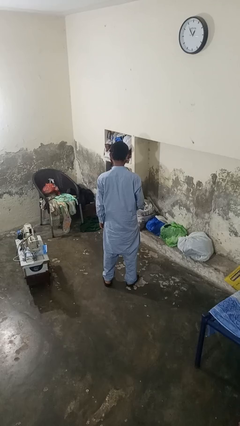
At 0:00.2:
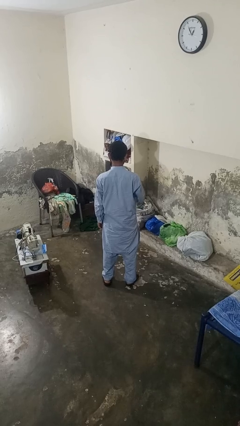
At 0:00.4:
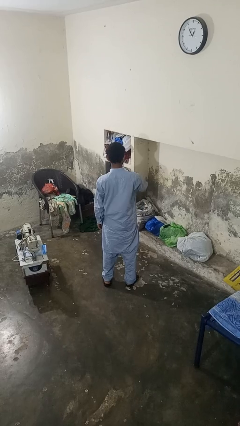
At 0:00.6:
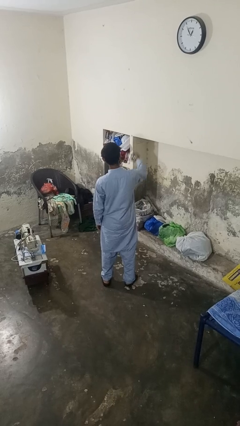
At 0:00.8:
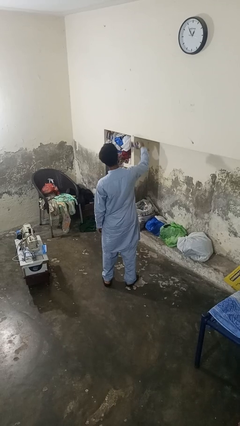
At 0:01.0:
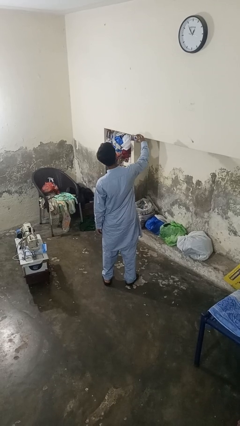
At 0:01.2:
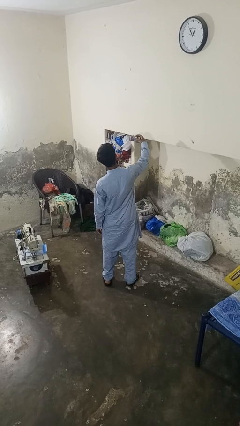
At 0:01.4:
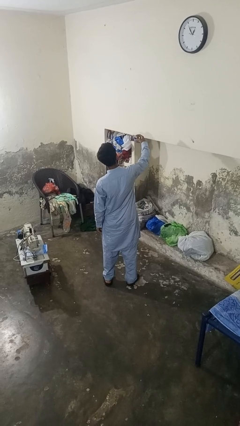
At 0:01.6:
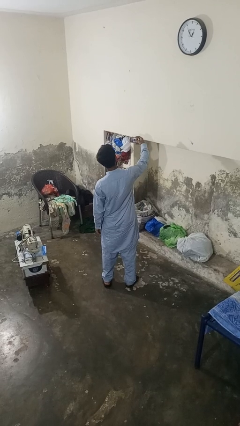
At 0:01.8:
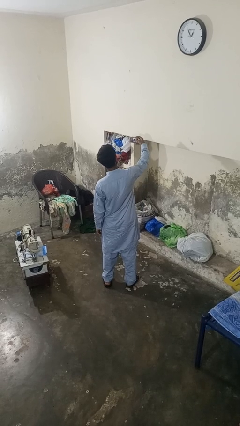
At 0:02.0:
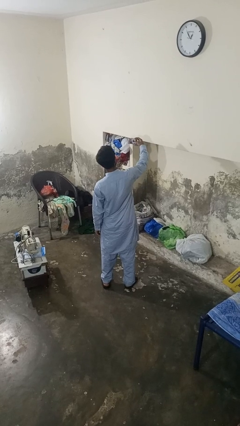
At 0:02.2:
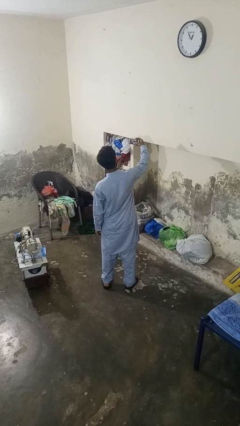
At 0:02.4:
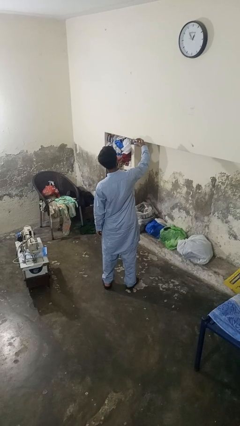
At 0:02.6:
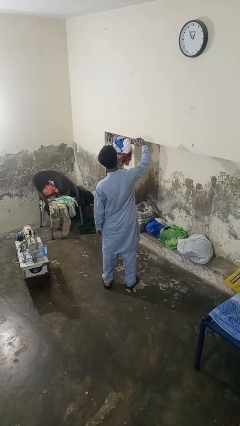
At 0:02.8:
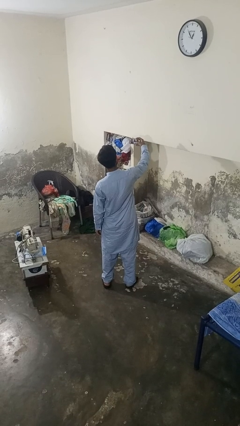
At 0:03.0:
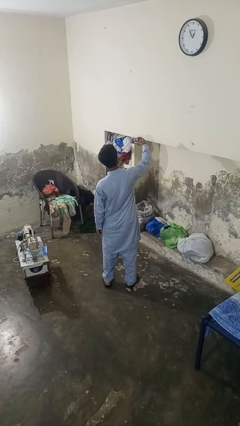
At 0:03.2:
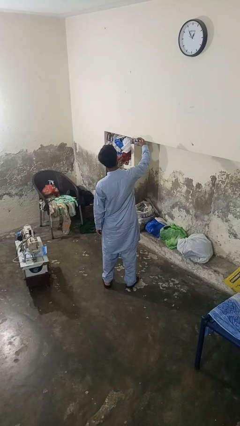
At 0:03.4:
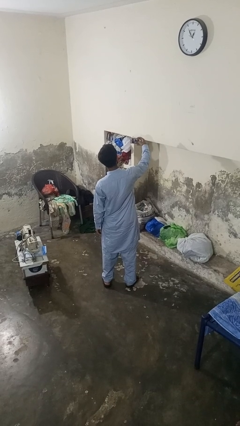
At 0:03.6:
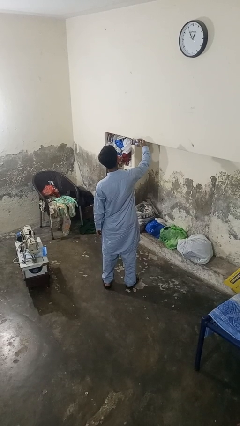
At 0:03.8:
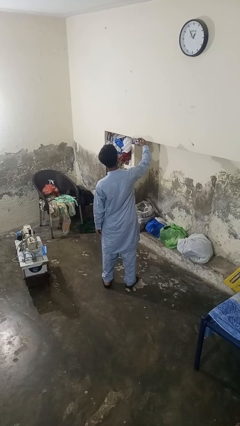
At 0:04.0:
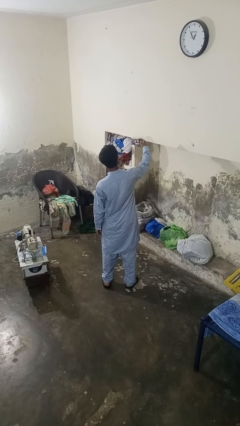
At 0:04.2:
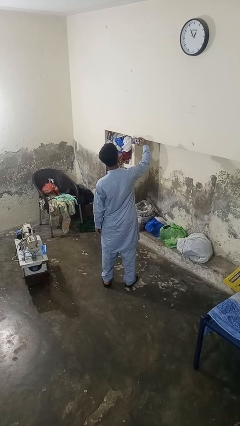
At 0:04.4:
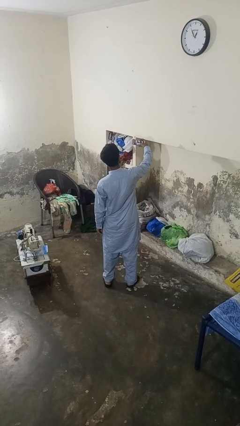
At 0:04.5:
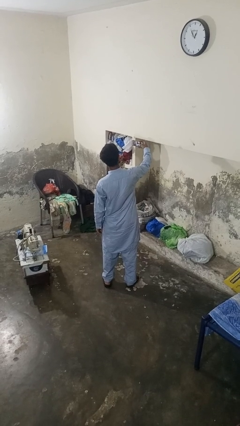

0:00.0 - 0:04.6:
person takes selfie

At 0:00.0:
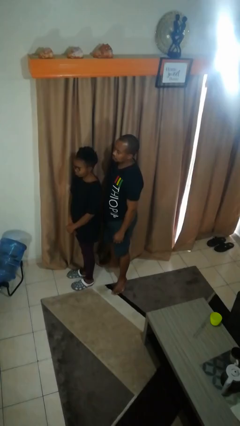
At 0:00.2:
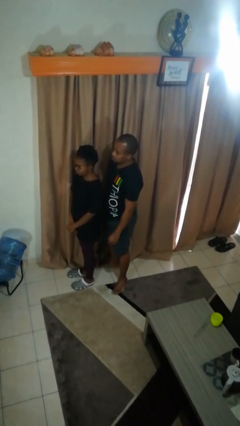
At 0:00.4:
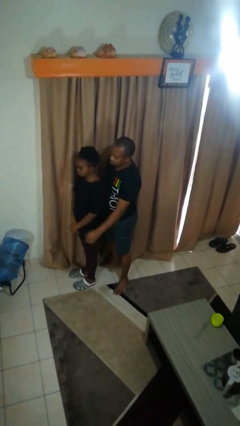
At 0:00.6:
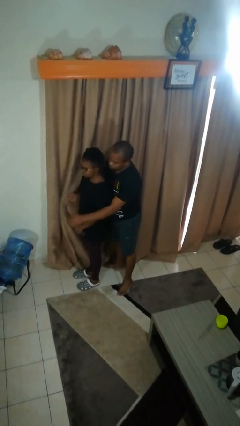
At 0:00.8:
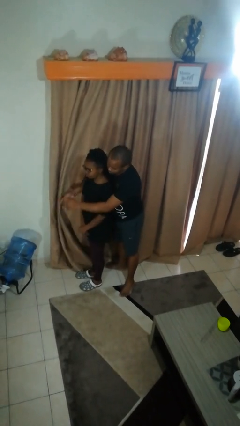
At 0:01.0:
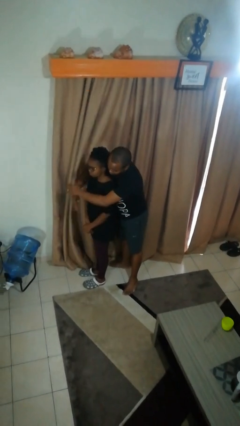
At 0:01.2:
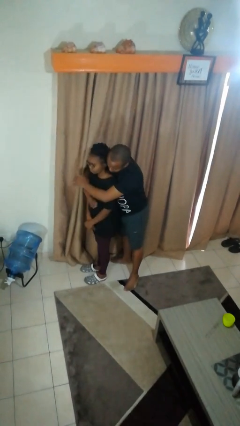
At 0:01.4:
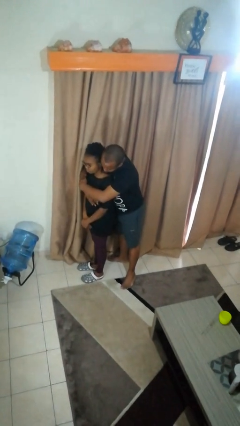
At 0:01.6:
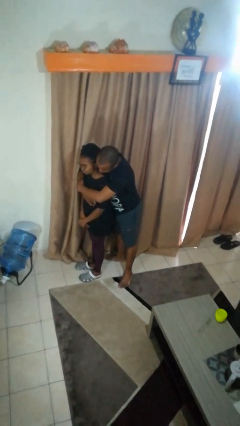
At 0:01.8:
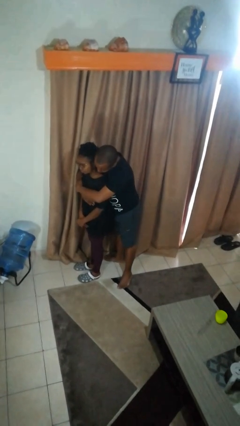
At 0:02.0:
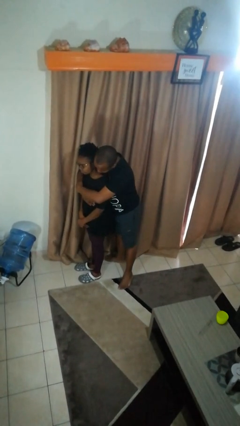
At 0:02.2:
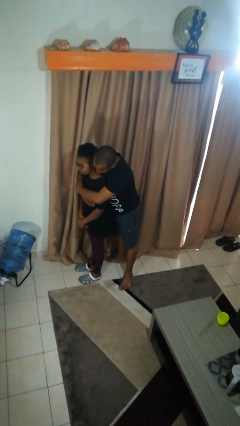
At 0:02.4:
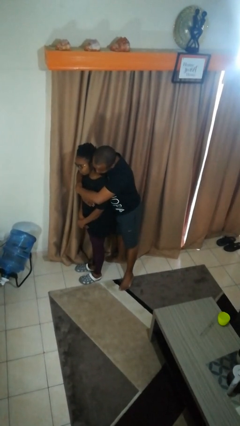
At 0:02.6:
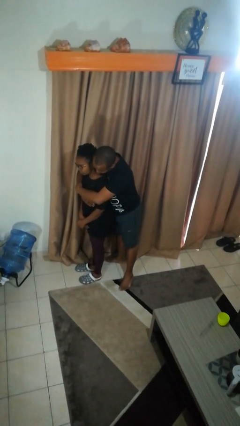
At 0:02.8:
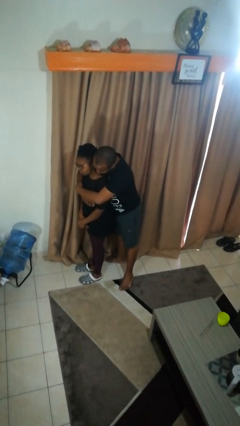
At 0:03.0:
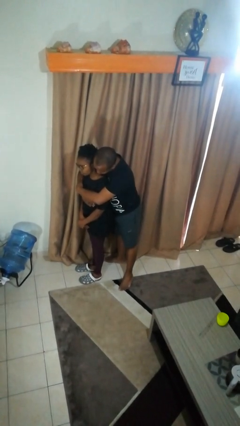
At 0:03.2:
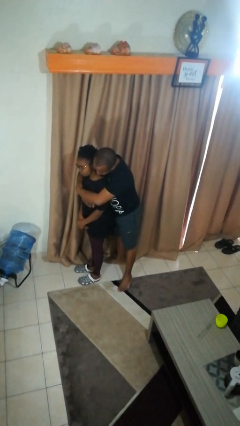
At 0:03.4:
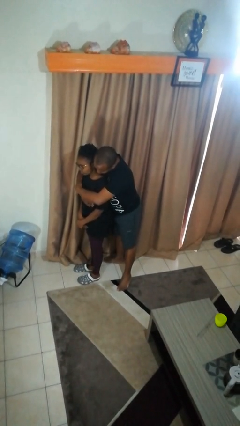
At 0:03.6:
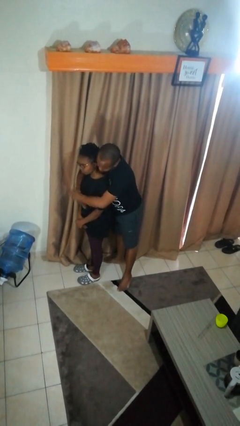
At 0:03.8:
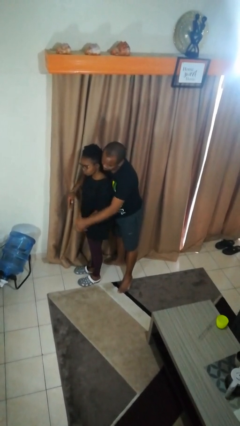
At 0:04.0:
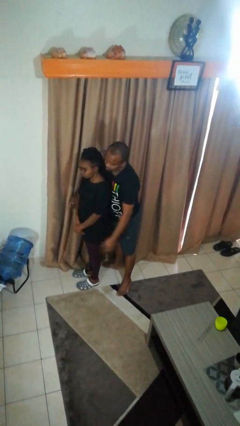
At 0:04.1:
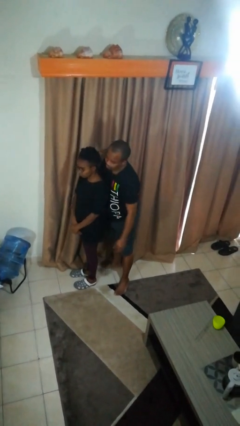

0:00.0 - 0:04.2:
person hugs person from behind

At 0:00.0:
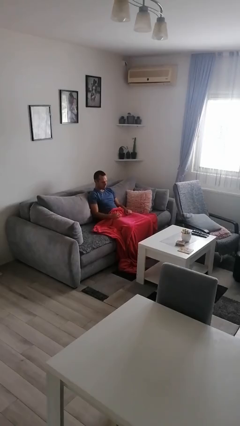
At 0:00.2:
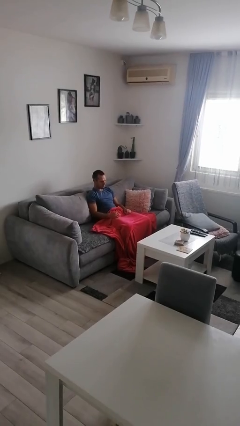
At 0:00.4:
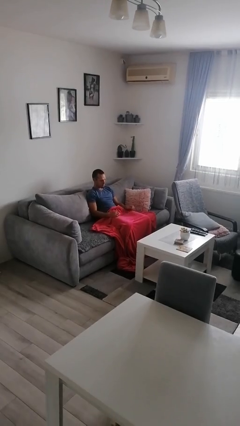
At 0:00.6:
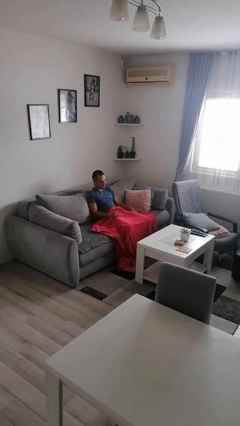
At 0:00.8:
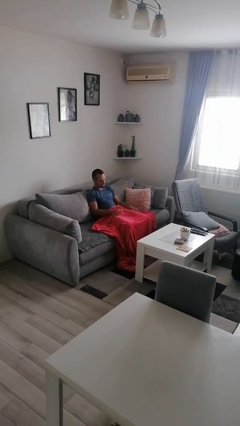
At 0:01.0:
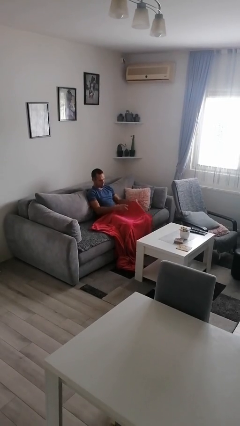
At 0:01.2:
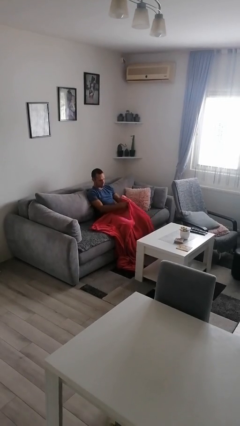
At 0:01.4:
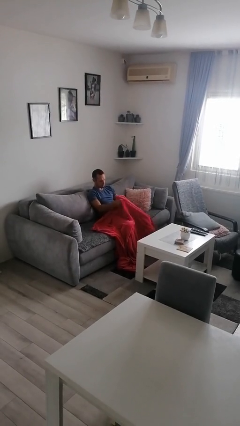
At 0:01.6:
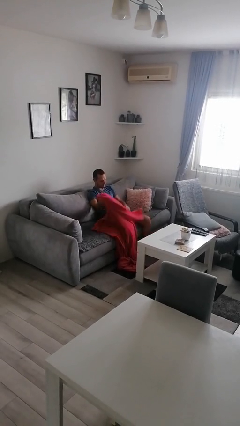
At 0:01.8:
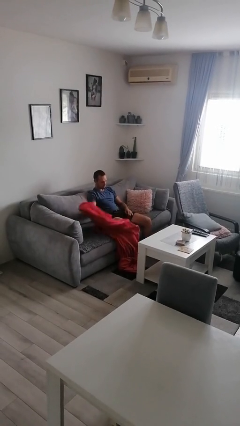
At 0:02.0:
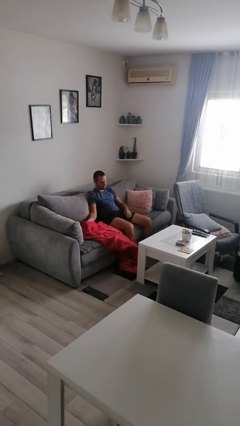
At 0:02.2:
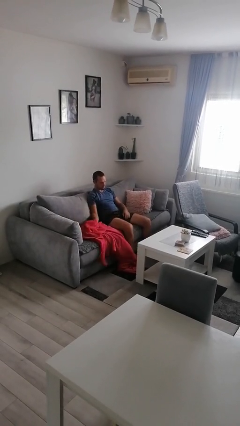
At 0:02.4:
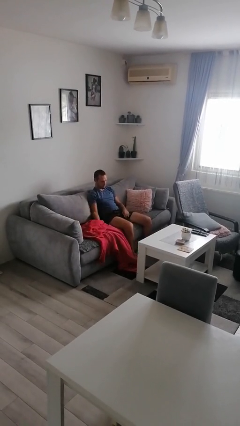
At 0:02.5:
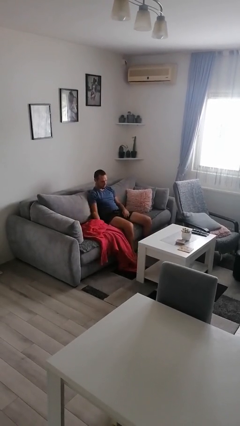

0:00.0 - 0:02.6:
person uncovers with blanket

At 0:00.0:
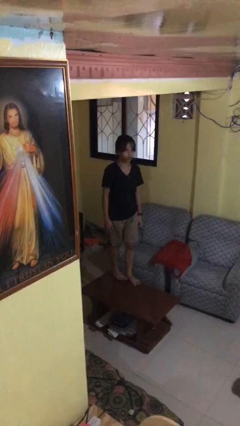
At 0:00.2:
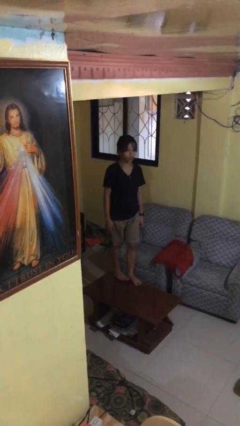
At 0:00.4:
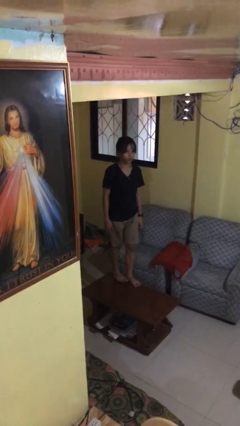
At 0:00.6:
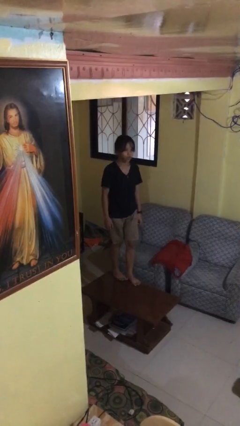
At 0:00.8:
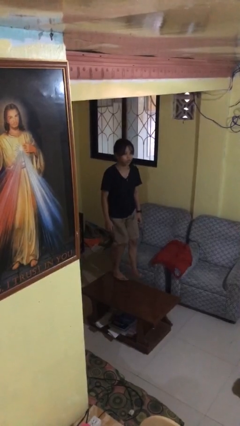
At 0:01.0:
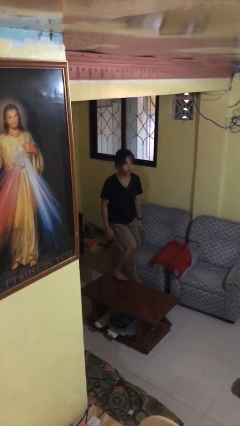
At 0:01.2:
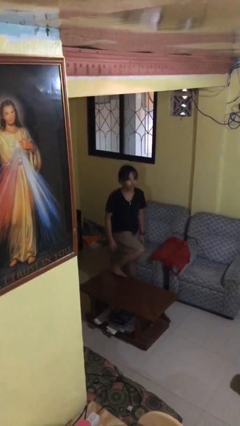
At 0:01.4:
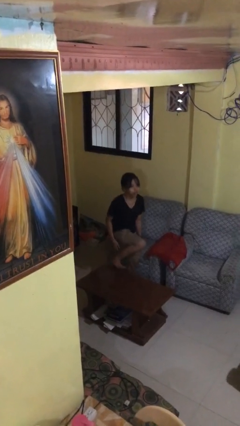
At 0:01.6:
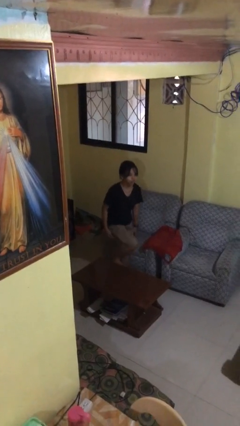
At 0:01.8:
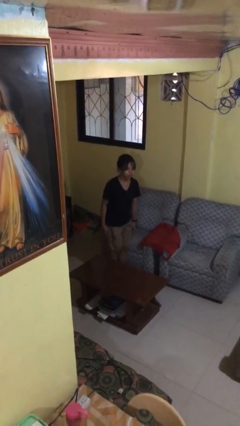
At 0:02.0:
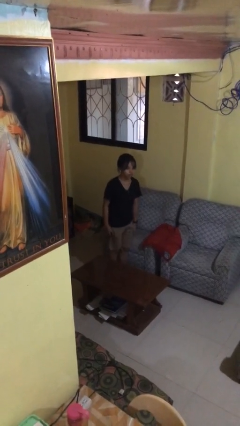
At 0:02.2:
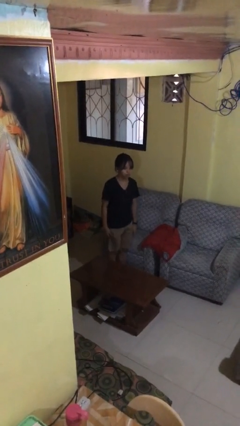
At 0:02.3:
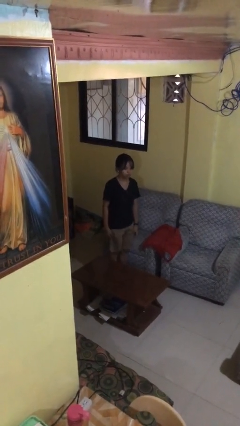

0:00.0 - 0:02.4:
person climbs off table

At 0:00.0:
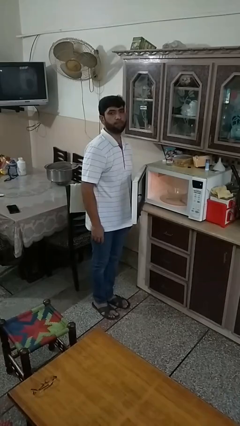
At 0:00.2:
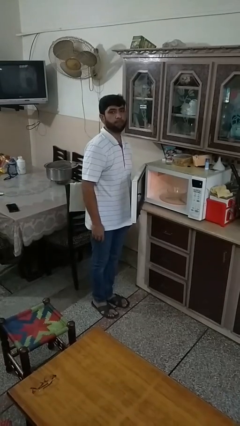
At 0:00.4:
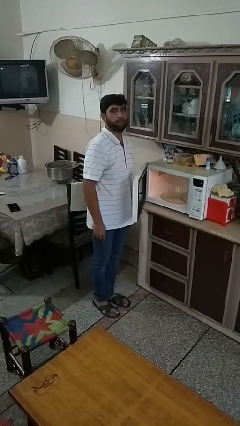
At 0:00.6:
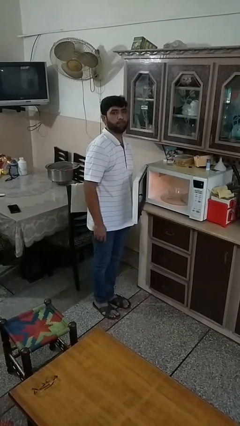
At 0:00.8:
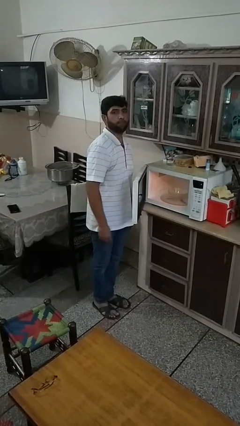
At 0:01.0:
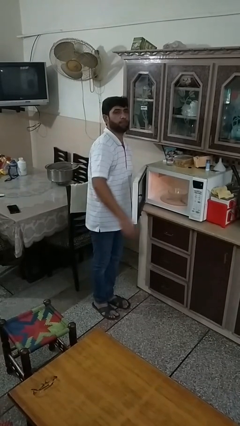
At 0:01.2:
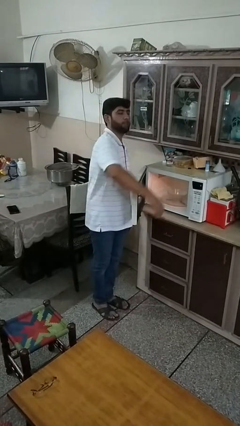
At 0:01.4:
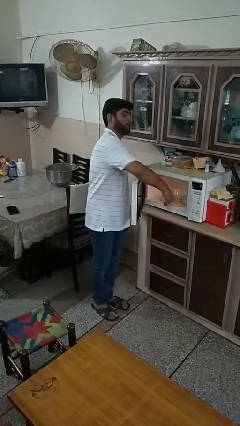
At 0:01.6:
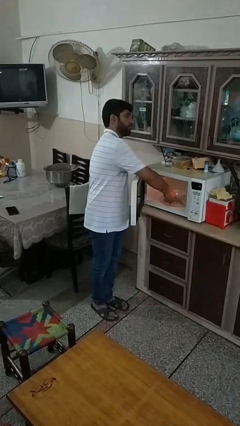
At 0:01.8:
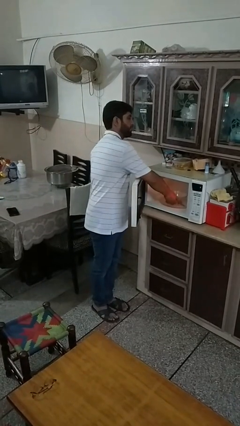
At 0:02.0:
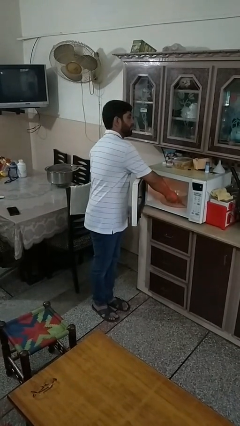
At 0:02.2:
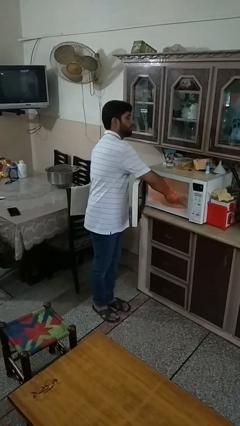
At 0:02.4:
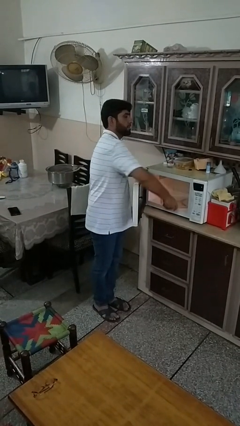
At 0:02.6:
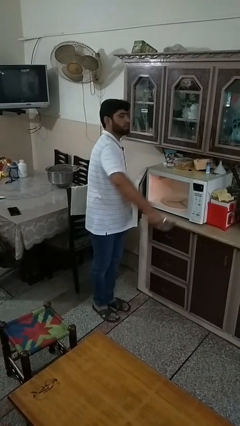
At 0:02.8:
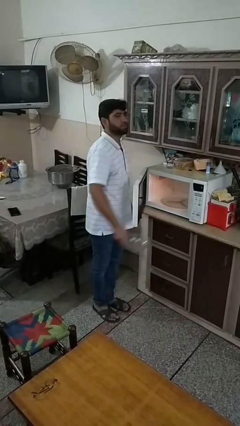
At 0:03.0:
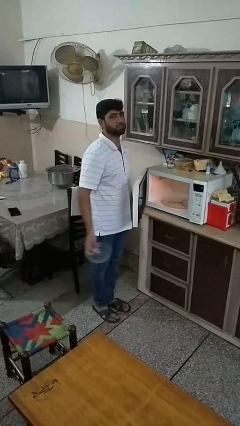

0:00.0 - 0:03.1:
person takes object from microwave

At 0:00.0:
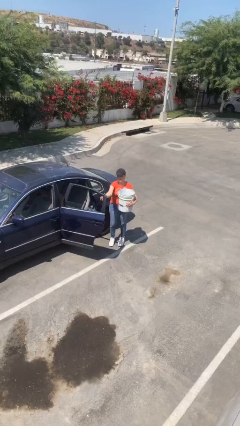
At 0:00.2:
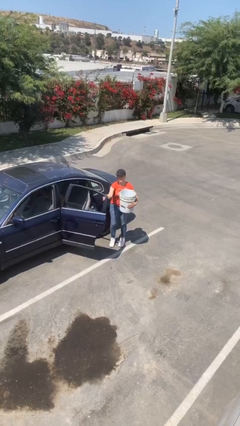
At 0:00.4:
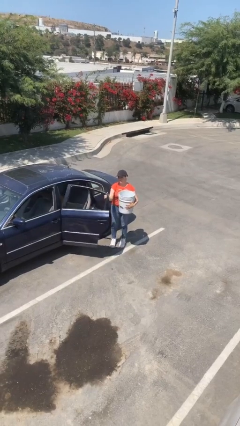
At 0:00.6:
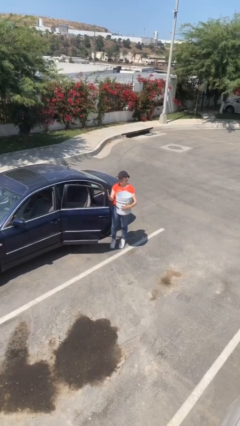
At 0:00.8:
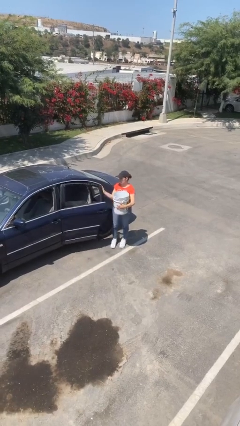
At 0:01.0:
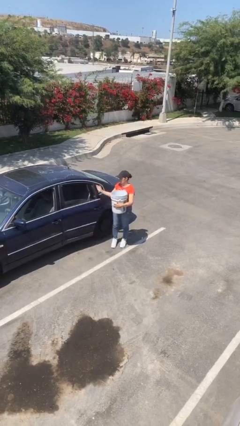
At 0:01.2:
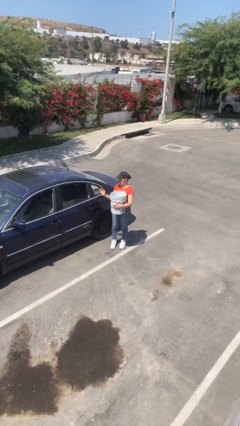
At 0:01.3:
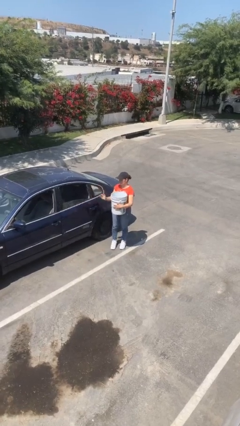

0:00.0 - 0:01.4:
person closes car door
